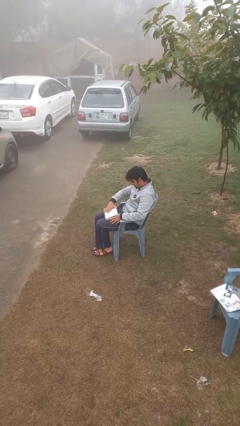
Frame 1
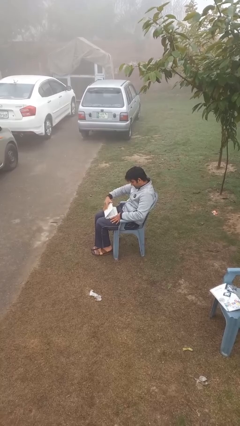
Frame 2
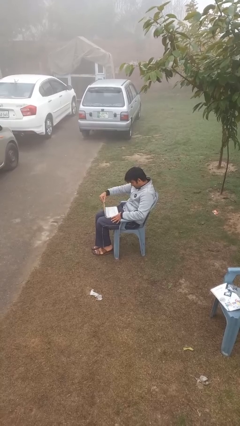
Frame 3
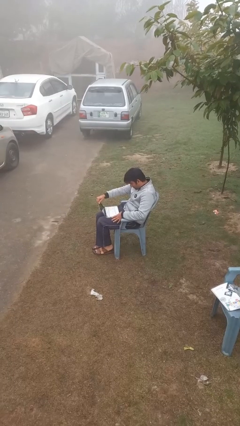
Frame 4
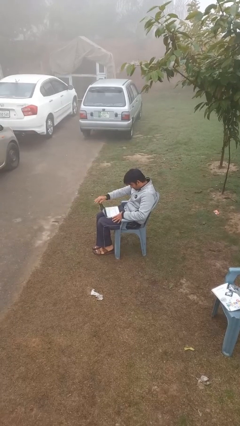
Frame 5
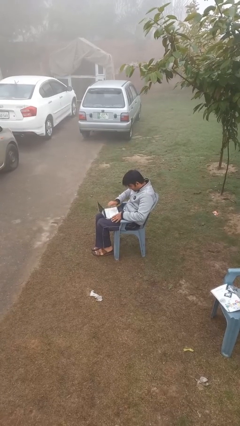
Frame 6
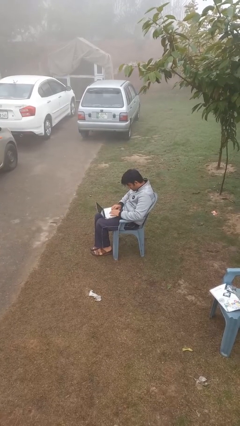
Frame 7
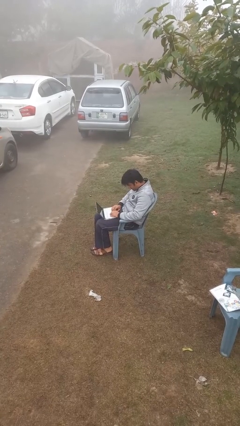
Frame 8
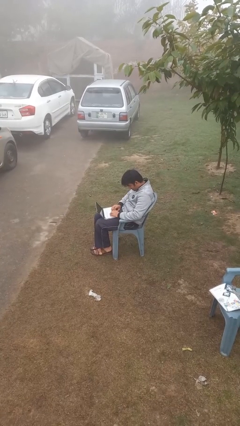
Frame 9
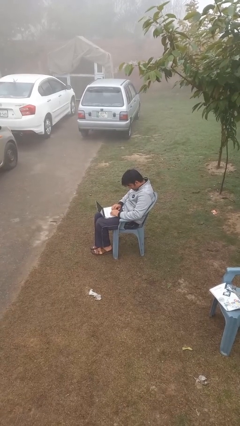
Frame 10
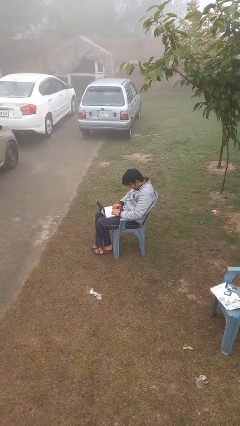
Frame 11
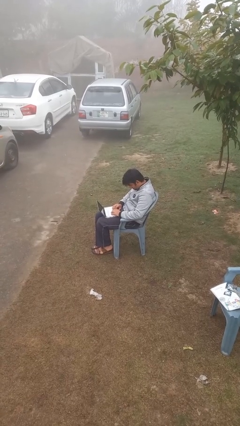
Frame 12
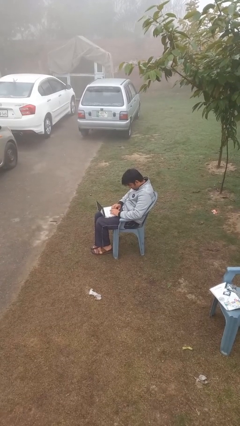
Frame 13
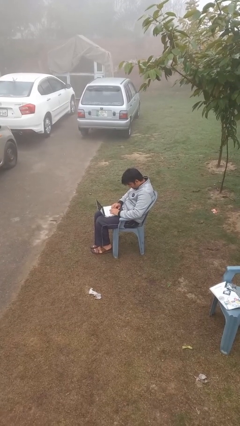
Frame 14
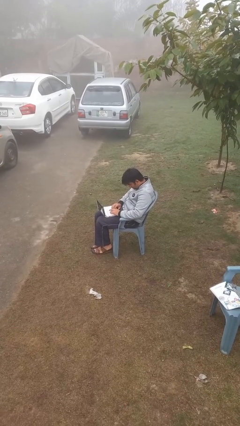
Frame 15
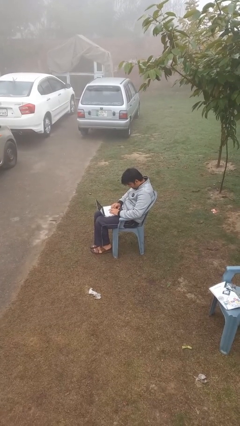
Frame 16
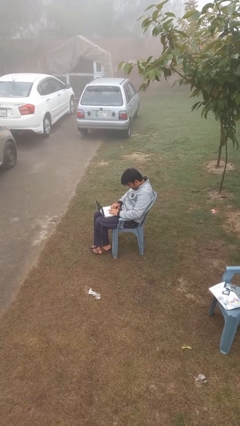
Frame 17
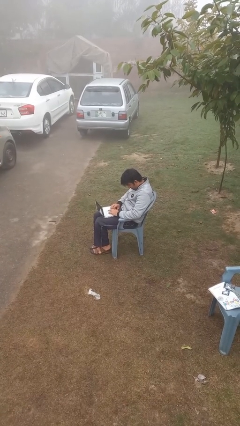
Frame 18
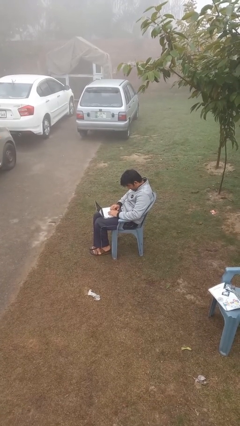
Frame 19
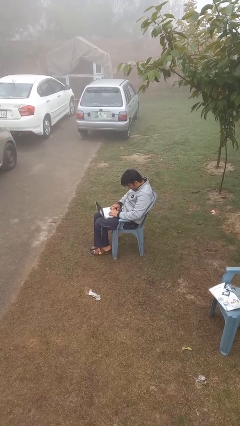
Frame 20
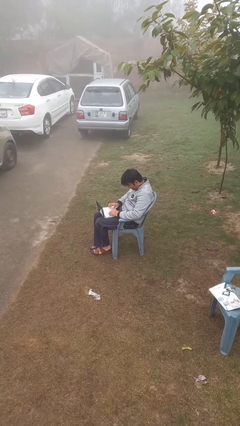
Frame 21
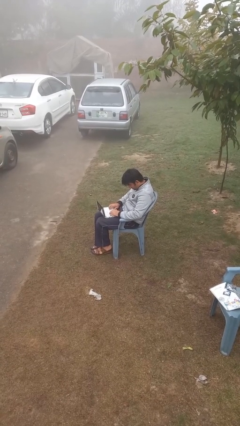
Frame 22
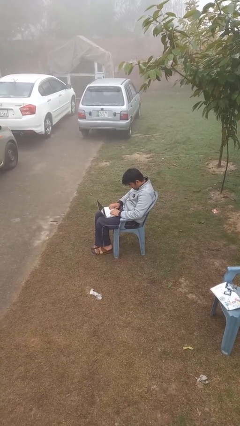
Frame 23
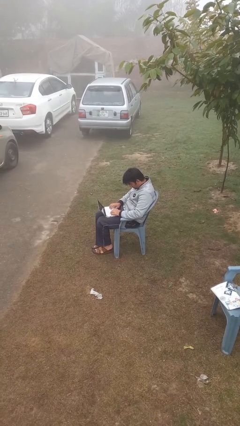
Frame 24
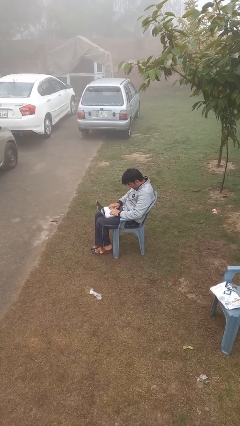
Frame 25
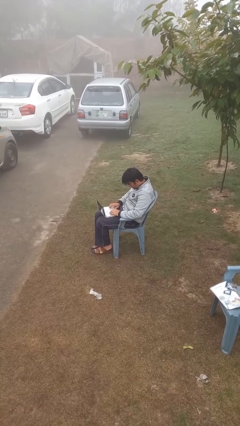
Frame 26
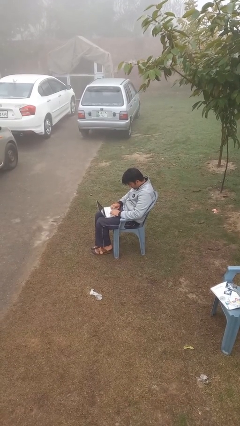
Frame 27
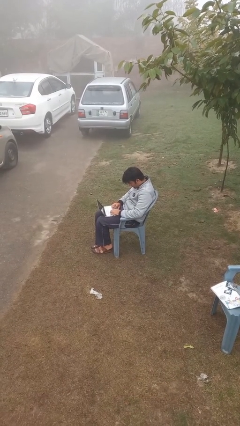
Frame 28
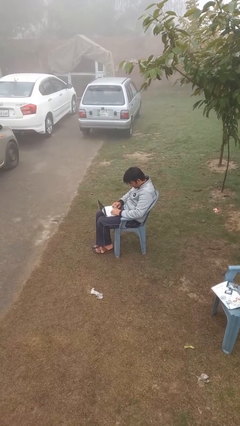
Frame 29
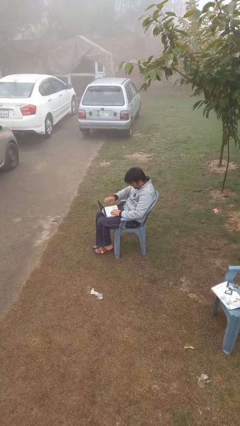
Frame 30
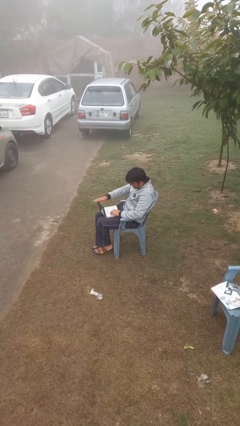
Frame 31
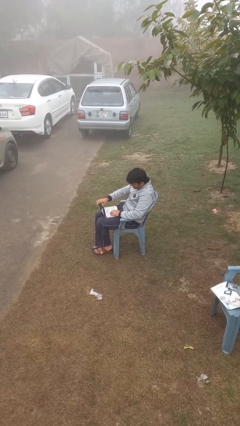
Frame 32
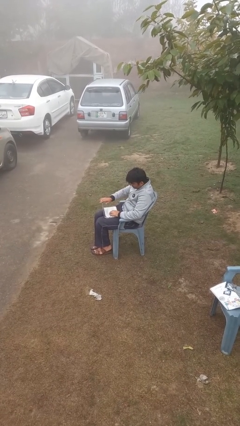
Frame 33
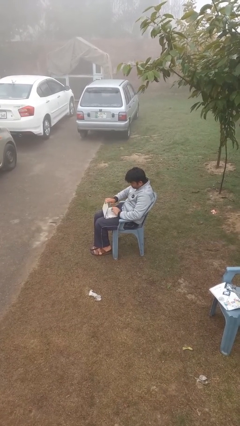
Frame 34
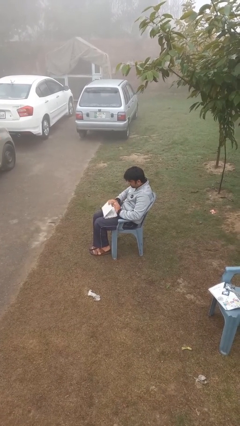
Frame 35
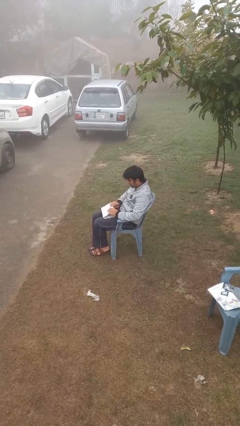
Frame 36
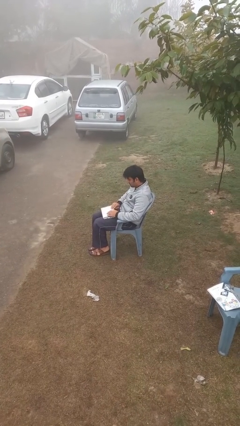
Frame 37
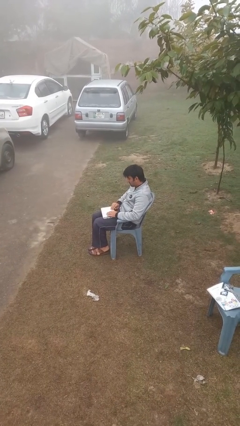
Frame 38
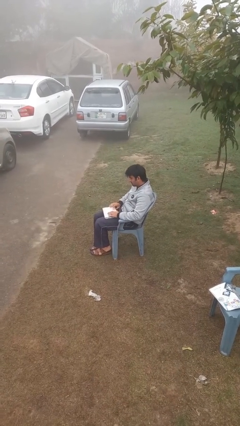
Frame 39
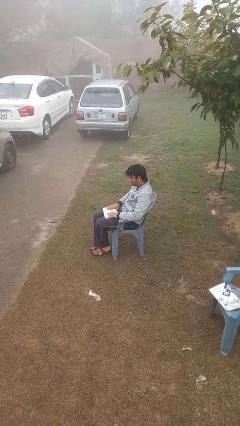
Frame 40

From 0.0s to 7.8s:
person interacts with laptop

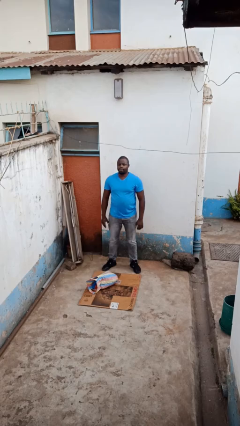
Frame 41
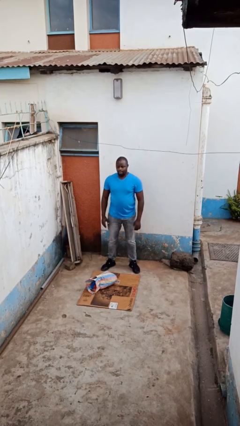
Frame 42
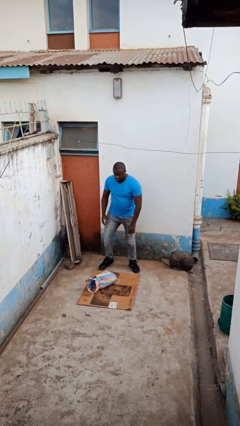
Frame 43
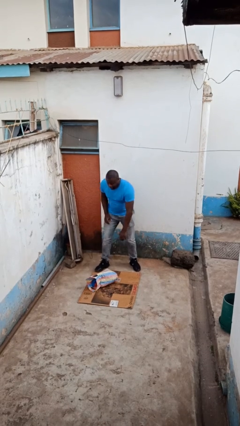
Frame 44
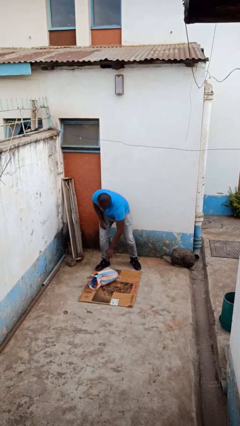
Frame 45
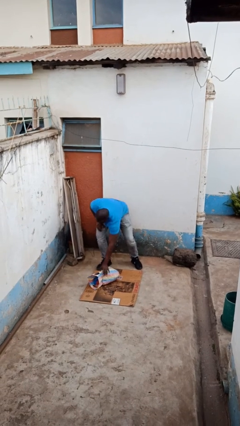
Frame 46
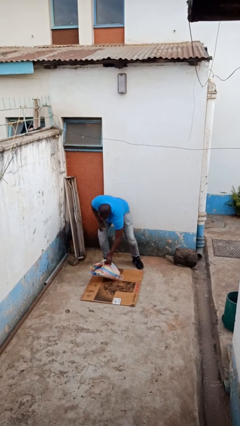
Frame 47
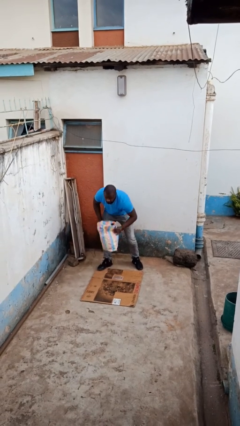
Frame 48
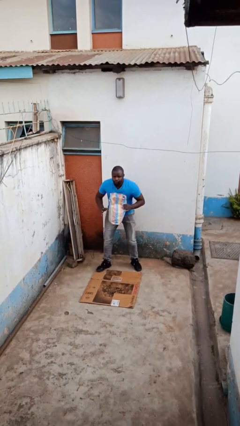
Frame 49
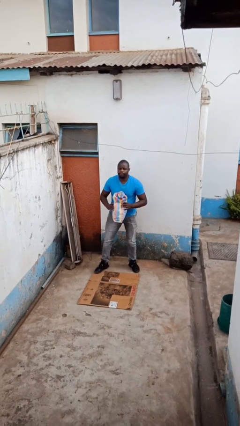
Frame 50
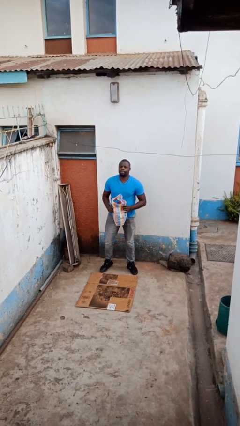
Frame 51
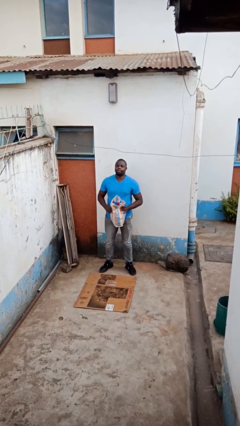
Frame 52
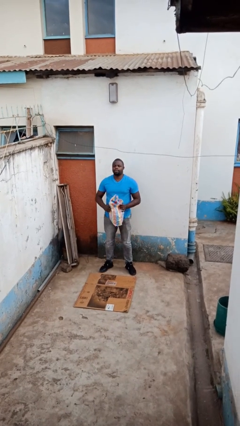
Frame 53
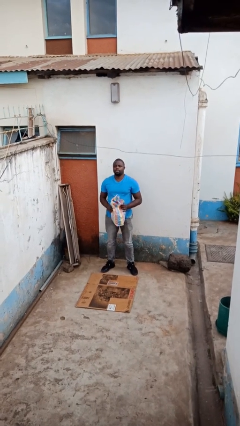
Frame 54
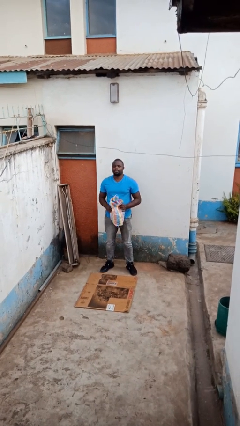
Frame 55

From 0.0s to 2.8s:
person picks up object from floor

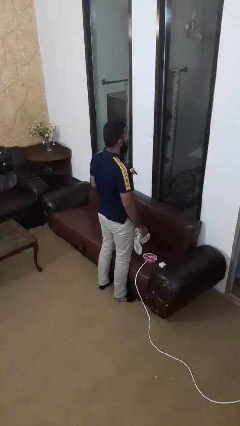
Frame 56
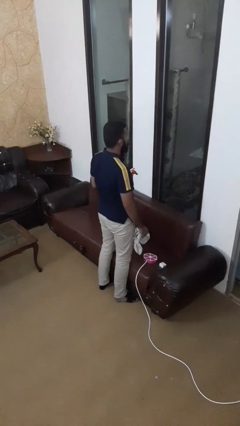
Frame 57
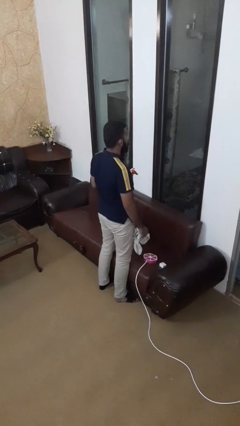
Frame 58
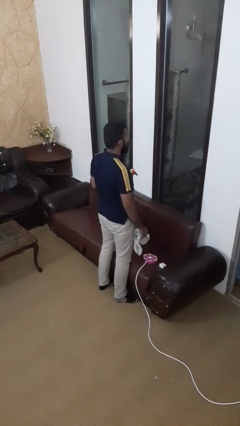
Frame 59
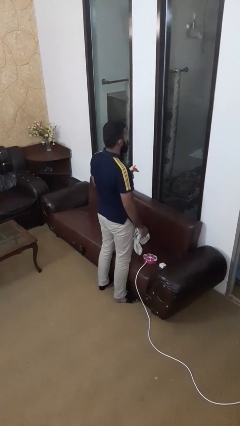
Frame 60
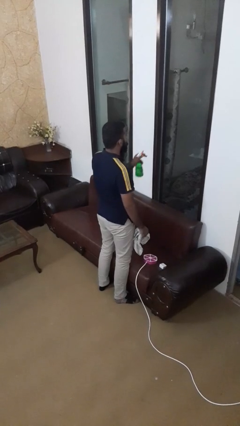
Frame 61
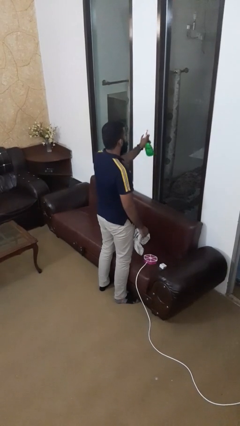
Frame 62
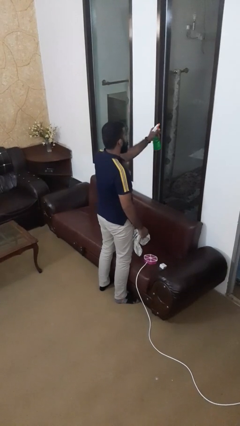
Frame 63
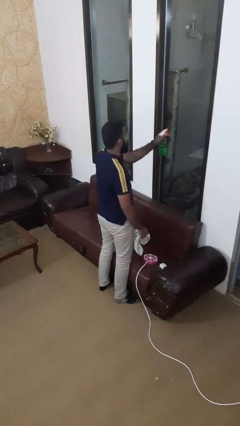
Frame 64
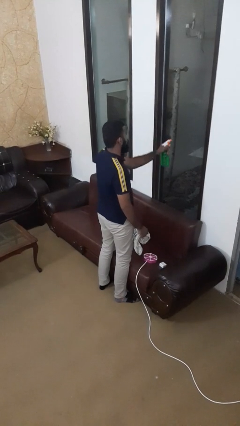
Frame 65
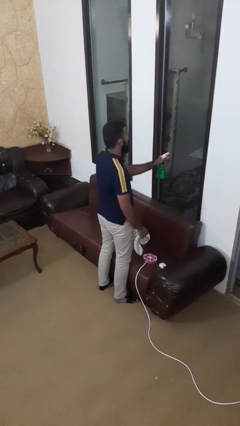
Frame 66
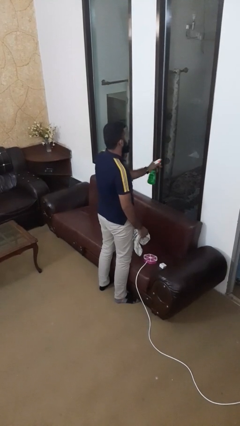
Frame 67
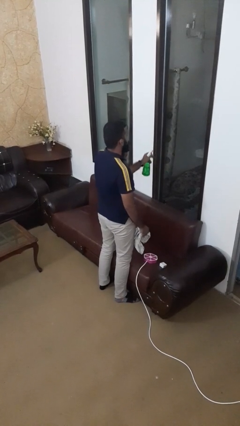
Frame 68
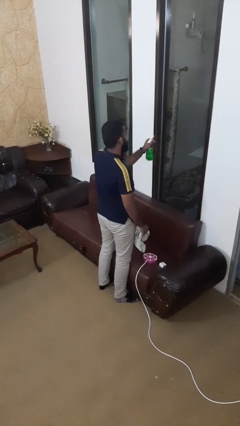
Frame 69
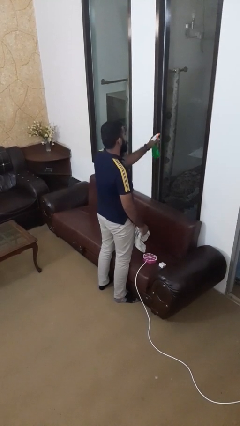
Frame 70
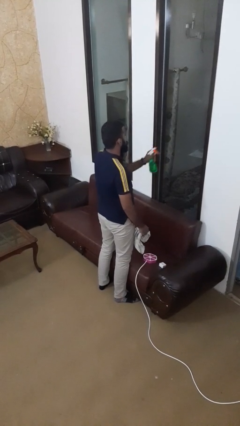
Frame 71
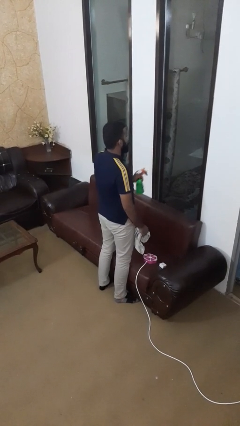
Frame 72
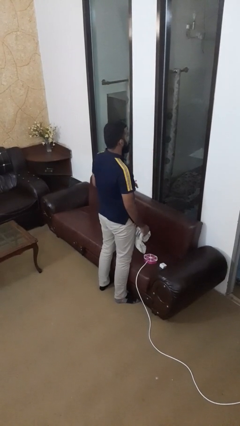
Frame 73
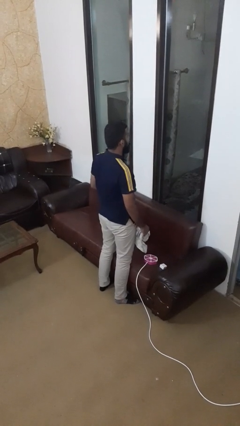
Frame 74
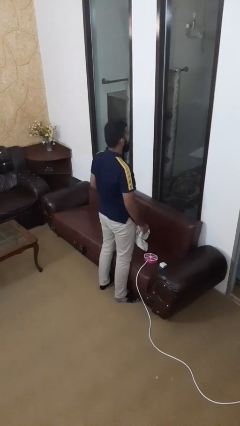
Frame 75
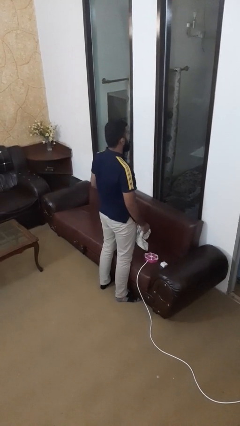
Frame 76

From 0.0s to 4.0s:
person sprays from bottle

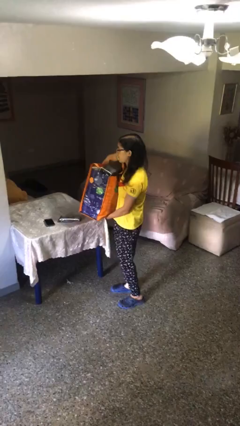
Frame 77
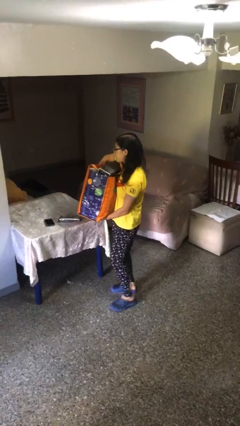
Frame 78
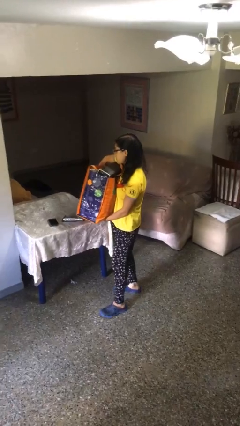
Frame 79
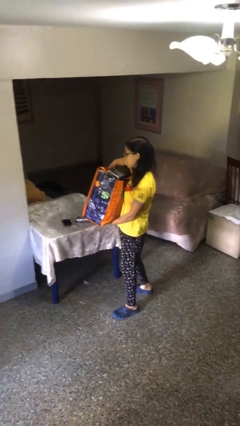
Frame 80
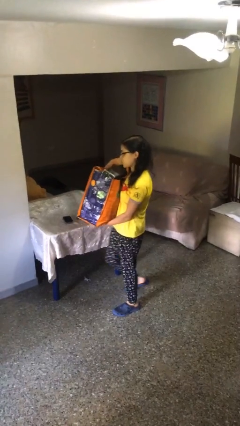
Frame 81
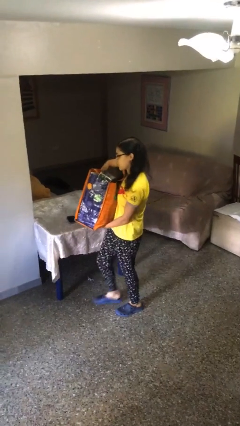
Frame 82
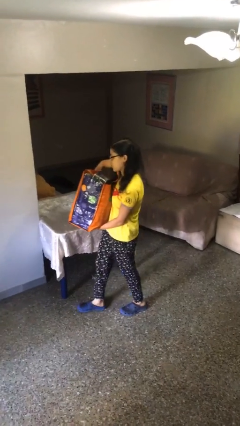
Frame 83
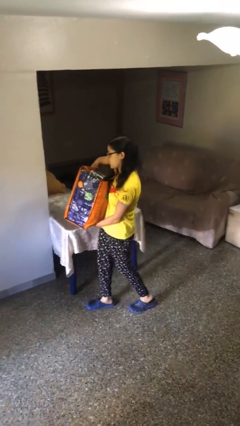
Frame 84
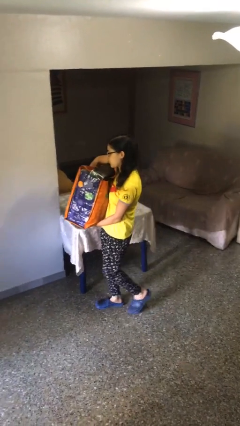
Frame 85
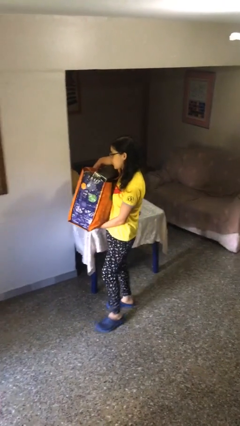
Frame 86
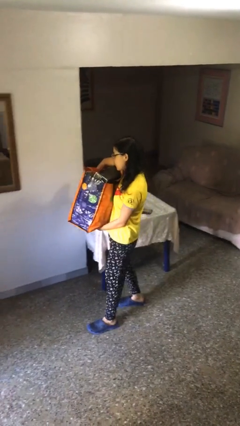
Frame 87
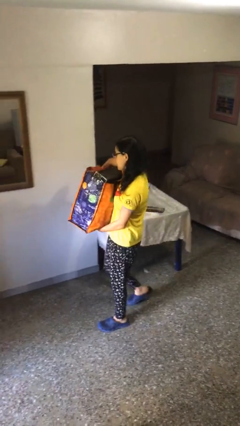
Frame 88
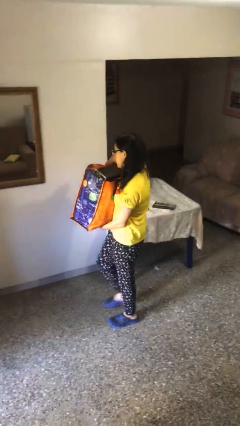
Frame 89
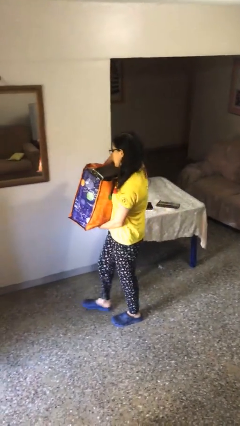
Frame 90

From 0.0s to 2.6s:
person carries heavy object

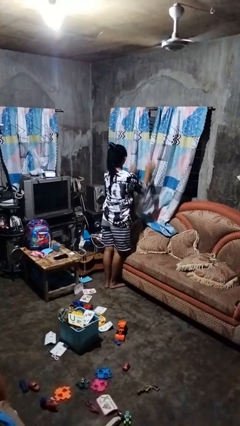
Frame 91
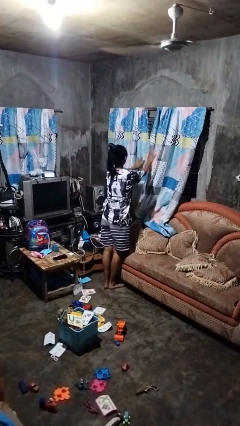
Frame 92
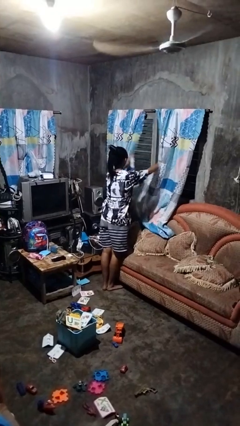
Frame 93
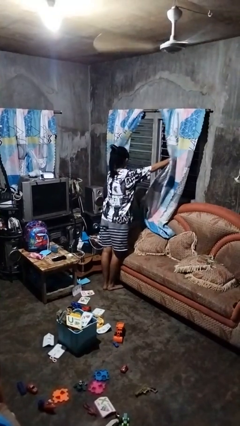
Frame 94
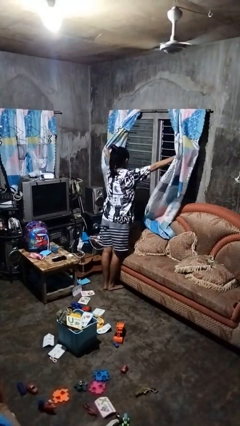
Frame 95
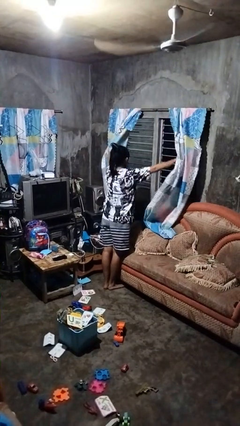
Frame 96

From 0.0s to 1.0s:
person opens curtains
